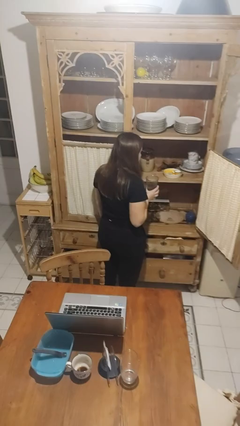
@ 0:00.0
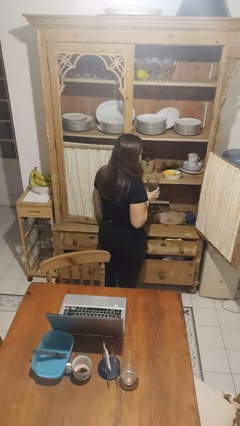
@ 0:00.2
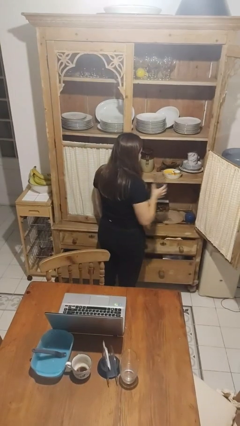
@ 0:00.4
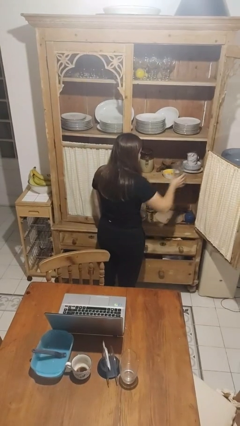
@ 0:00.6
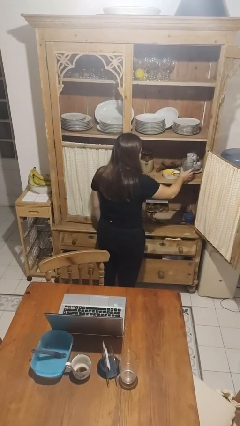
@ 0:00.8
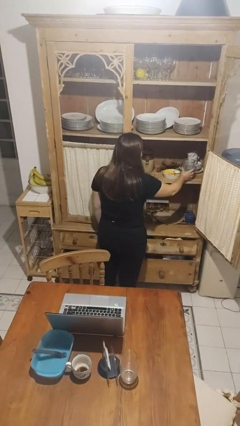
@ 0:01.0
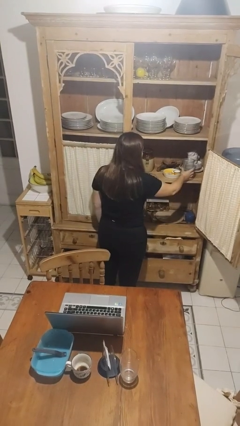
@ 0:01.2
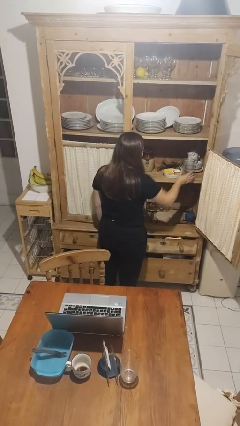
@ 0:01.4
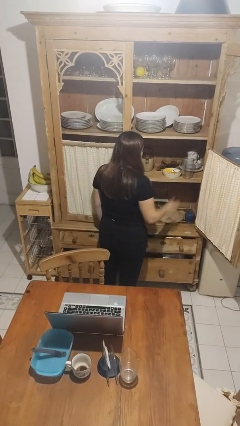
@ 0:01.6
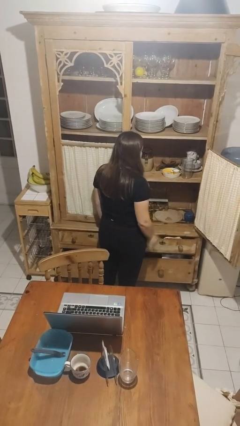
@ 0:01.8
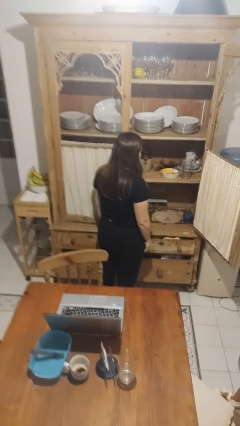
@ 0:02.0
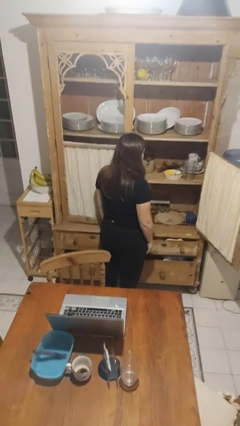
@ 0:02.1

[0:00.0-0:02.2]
person puts object in cabinet

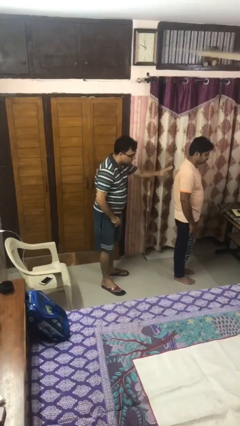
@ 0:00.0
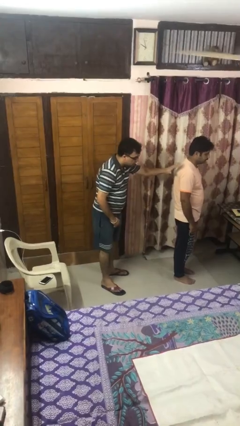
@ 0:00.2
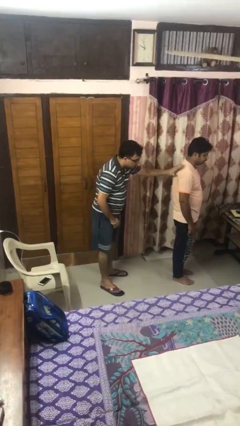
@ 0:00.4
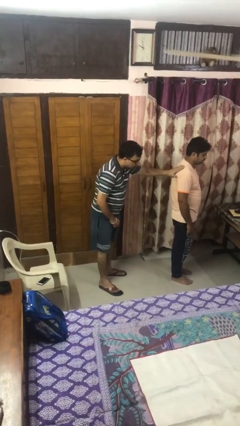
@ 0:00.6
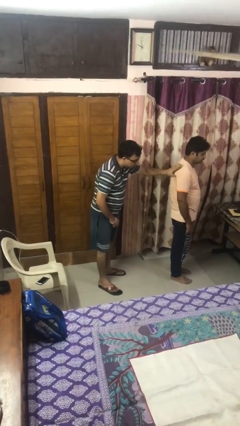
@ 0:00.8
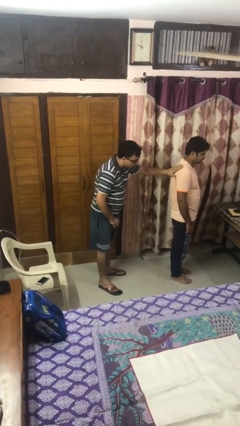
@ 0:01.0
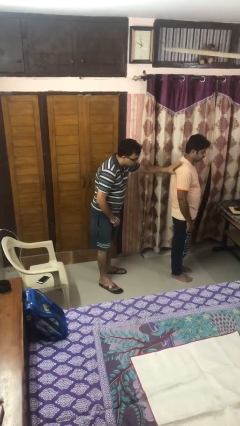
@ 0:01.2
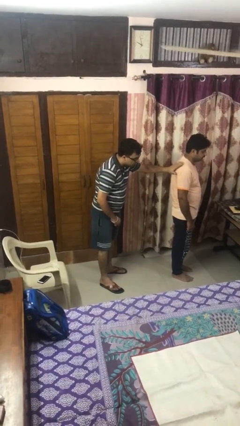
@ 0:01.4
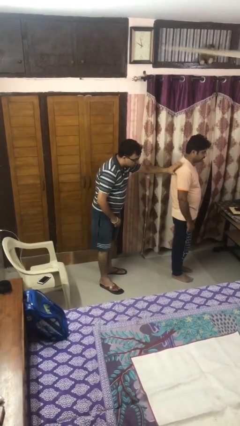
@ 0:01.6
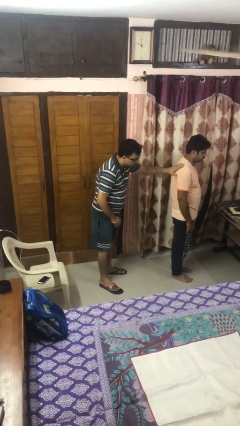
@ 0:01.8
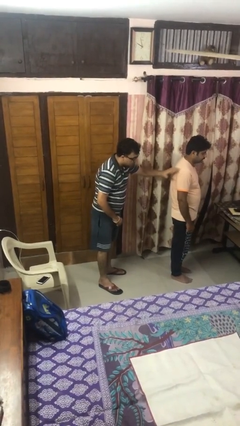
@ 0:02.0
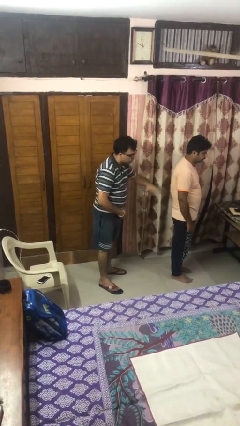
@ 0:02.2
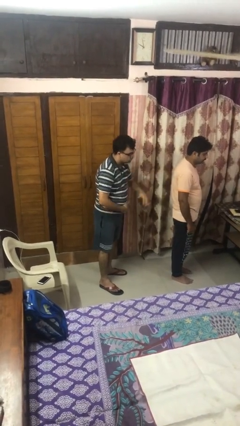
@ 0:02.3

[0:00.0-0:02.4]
person touches back of person

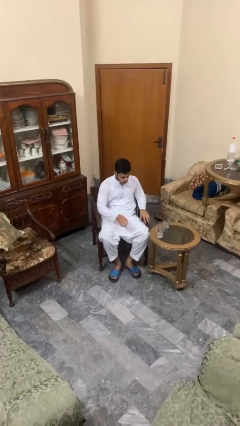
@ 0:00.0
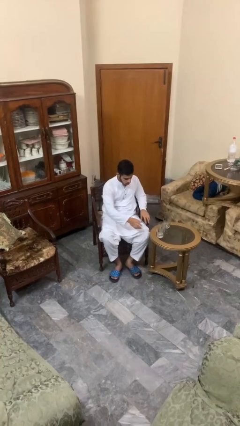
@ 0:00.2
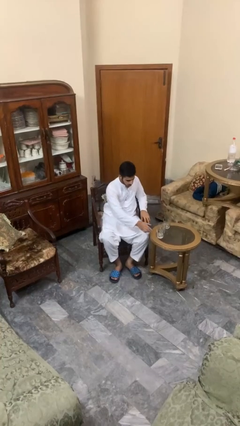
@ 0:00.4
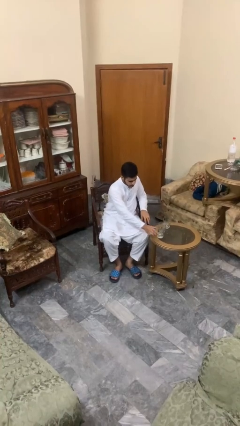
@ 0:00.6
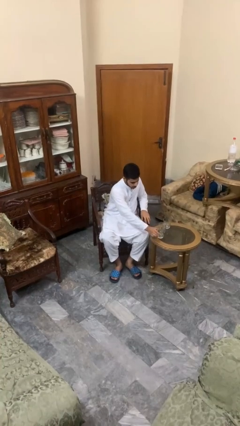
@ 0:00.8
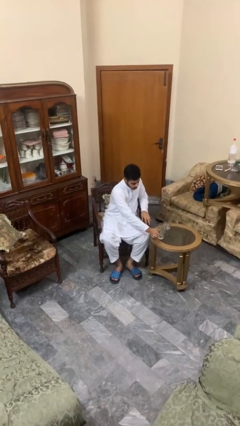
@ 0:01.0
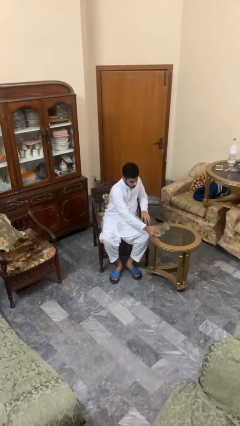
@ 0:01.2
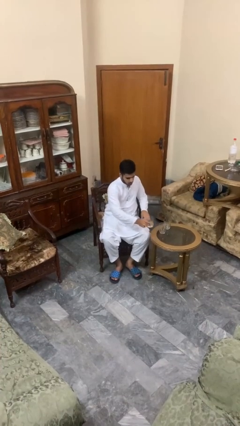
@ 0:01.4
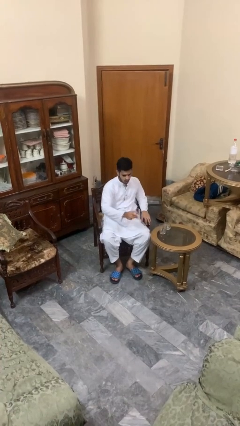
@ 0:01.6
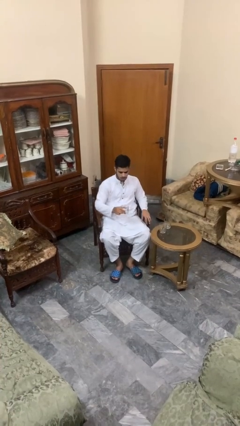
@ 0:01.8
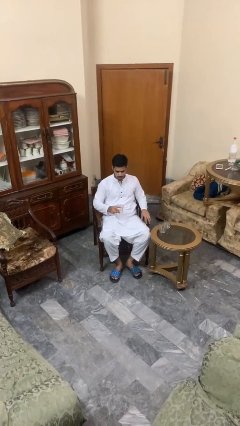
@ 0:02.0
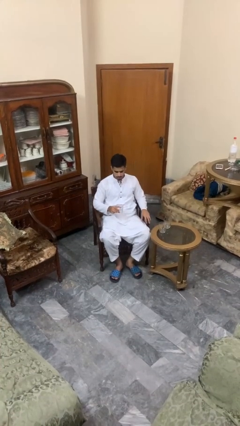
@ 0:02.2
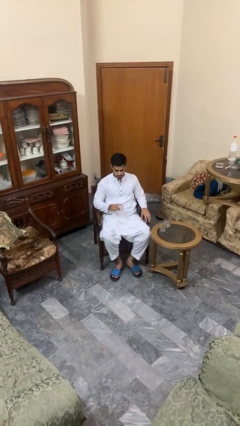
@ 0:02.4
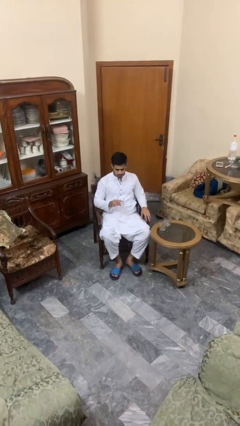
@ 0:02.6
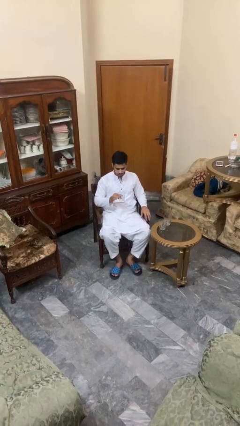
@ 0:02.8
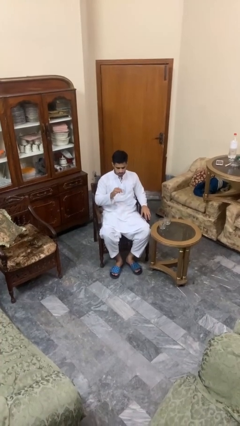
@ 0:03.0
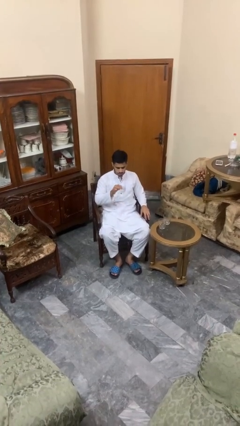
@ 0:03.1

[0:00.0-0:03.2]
person picks up object from table

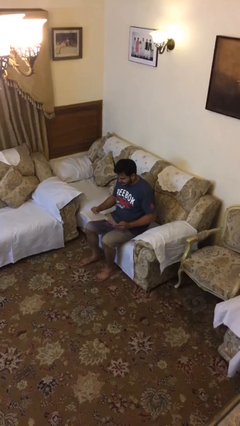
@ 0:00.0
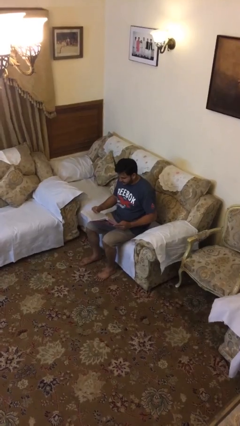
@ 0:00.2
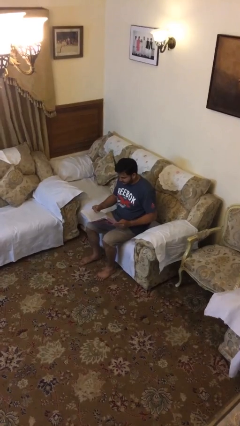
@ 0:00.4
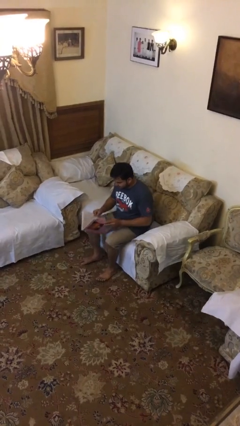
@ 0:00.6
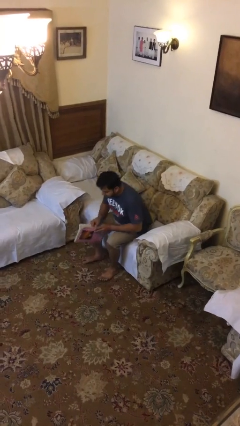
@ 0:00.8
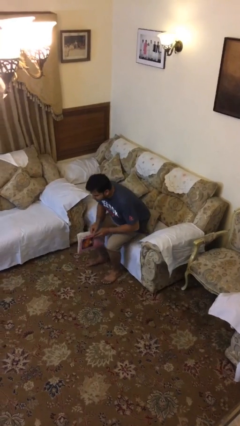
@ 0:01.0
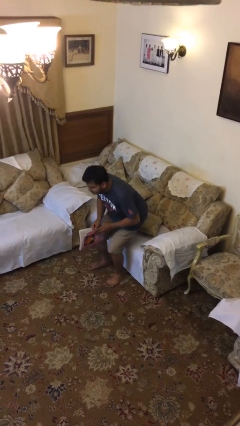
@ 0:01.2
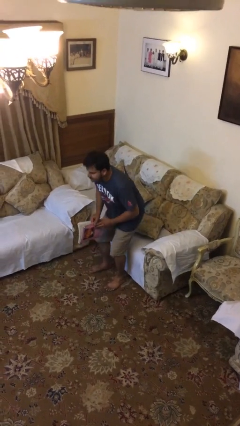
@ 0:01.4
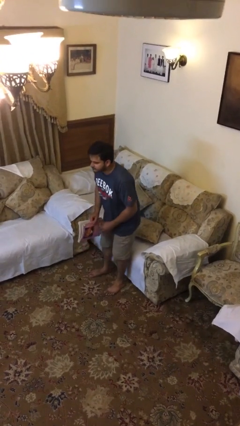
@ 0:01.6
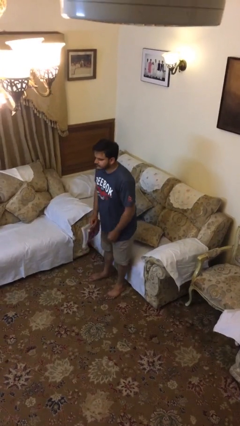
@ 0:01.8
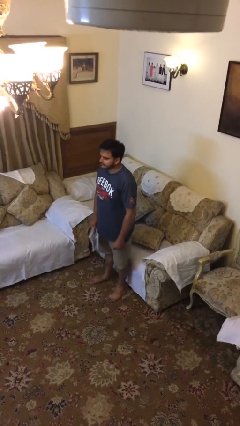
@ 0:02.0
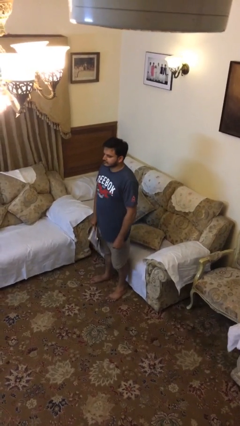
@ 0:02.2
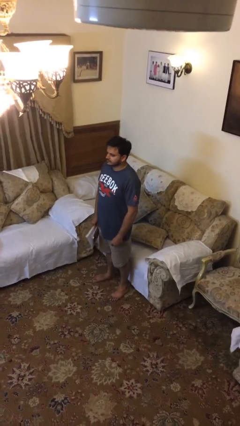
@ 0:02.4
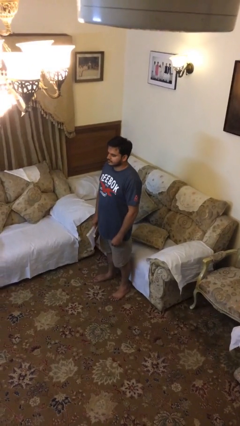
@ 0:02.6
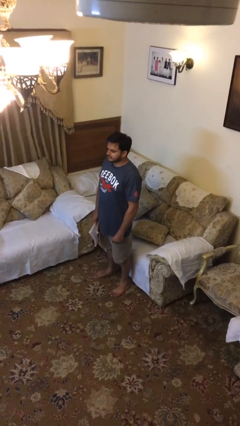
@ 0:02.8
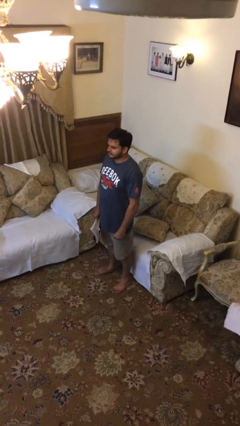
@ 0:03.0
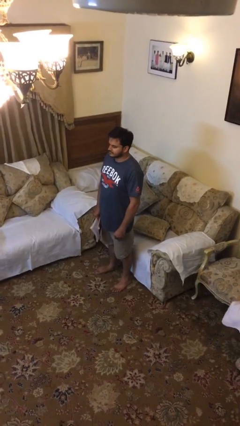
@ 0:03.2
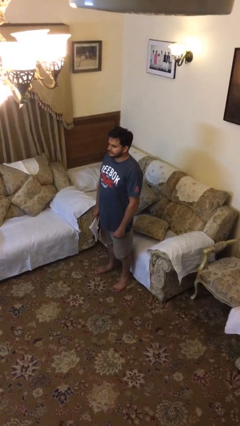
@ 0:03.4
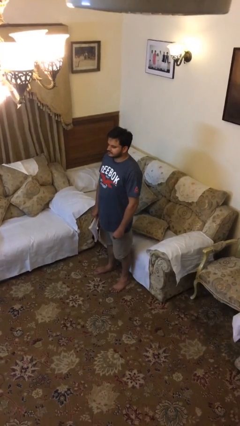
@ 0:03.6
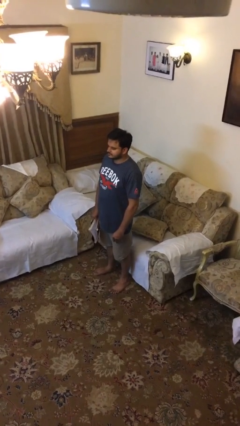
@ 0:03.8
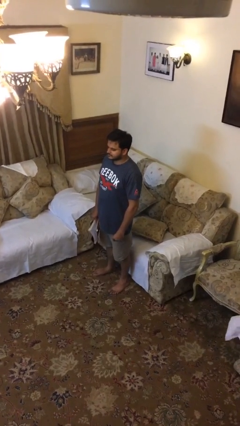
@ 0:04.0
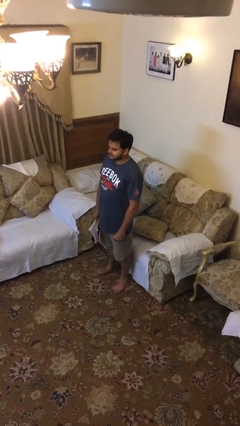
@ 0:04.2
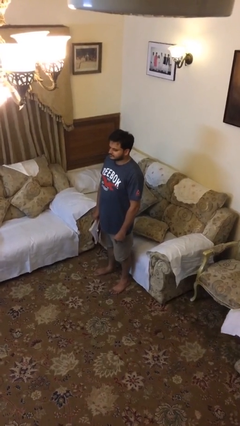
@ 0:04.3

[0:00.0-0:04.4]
person stands up

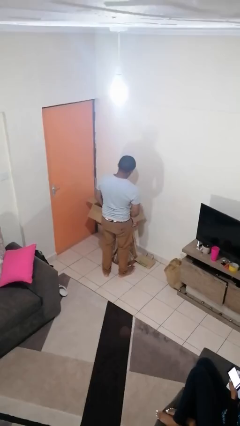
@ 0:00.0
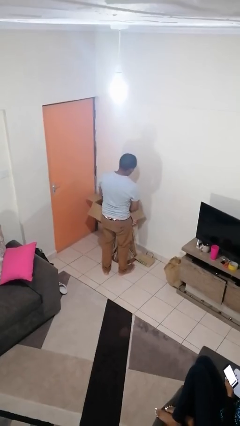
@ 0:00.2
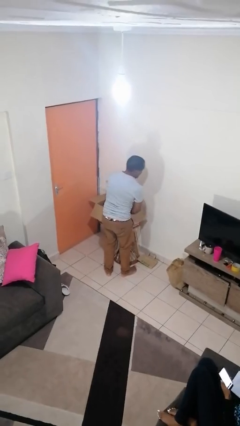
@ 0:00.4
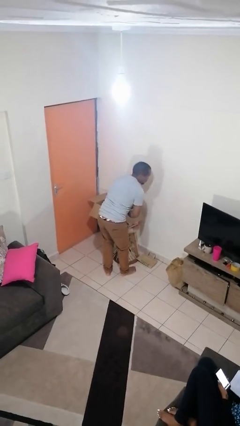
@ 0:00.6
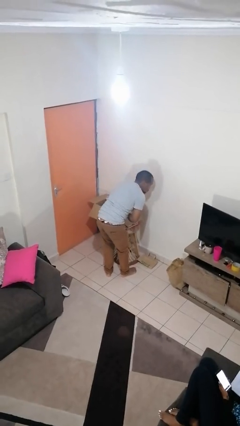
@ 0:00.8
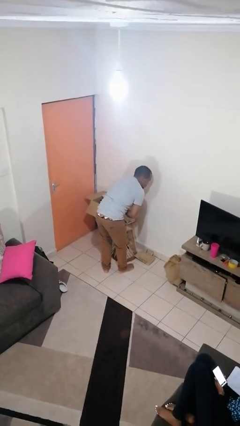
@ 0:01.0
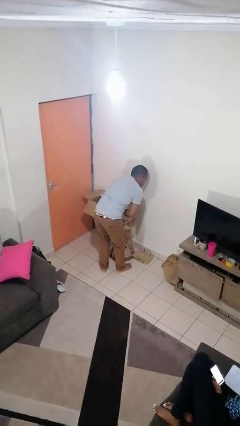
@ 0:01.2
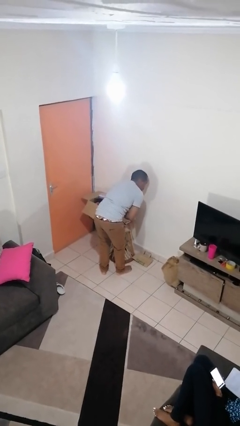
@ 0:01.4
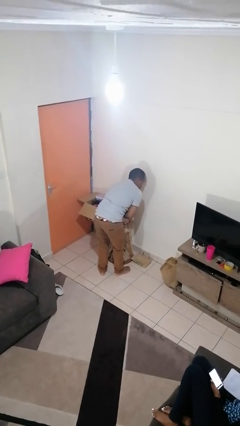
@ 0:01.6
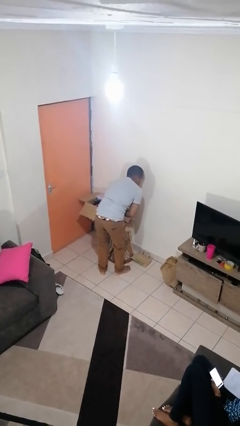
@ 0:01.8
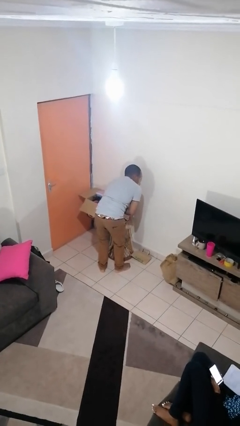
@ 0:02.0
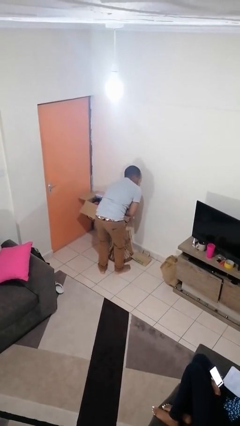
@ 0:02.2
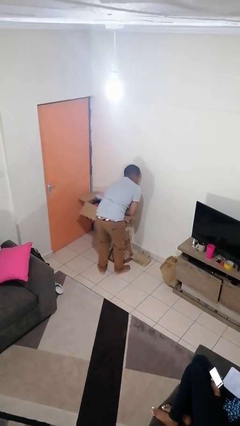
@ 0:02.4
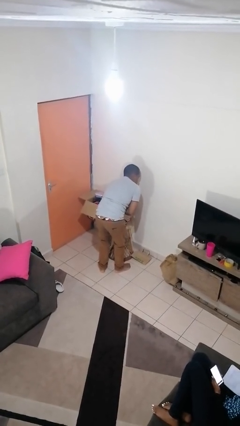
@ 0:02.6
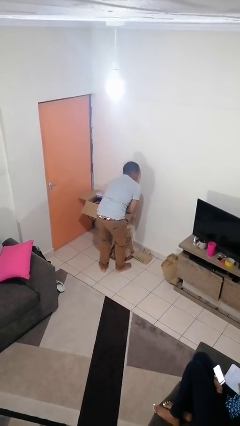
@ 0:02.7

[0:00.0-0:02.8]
person searches in box

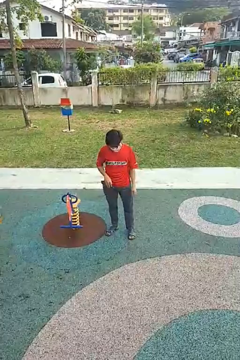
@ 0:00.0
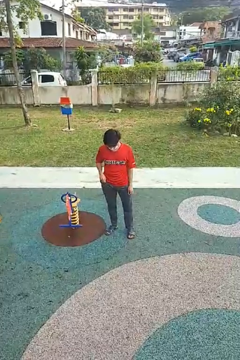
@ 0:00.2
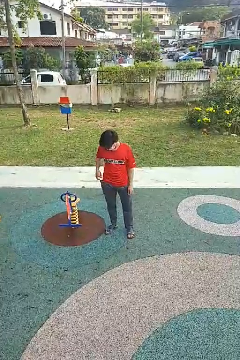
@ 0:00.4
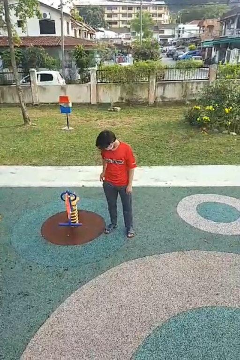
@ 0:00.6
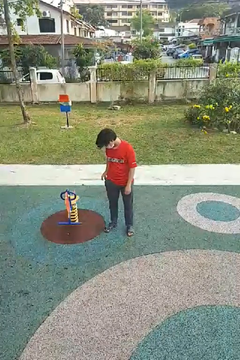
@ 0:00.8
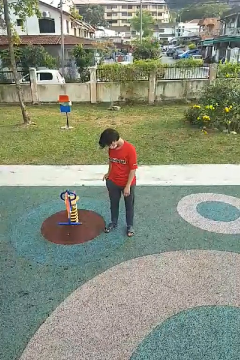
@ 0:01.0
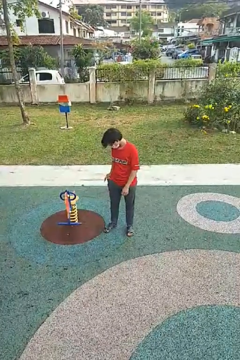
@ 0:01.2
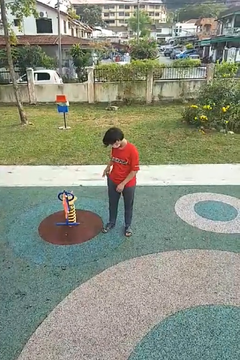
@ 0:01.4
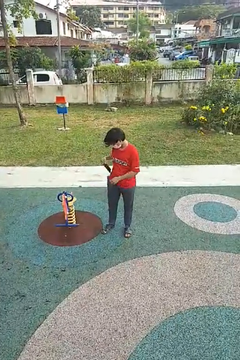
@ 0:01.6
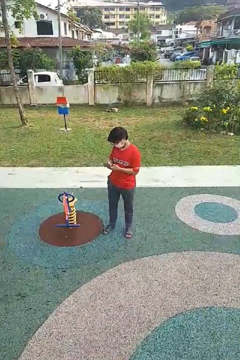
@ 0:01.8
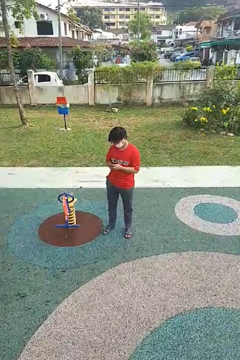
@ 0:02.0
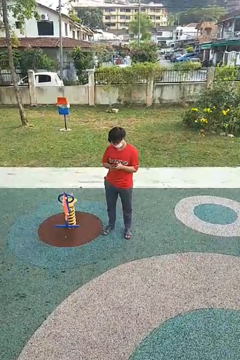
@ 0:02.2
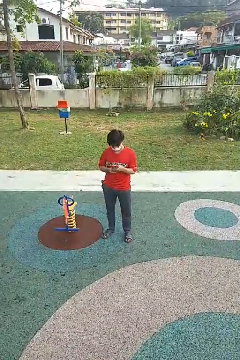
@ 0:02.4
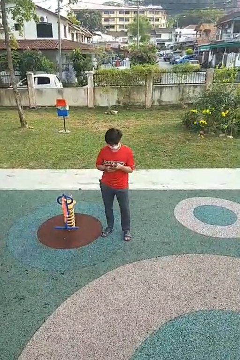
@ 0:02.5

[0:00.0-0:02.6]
person takes phone from pocket
